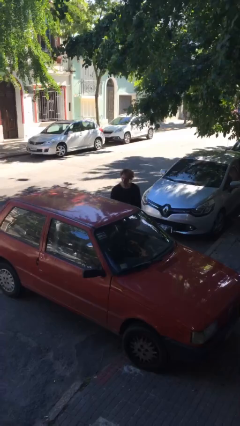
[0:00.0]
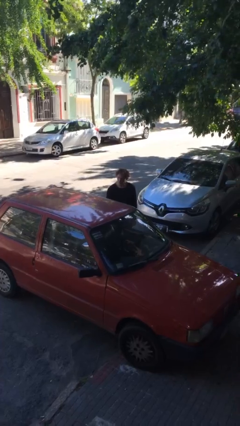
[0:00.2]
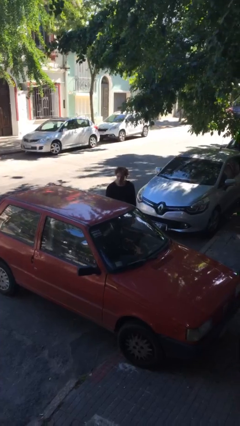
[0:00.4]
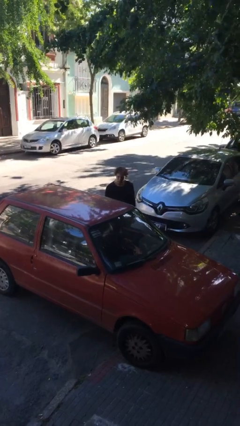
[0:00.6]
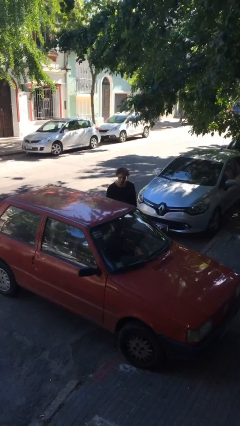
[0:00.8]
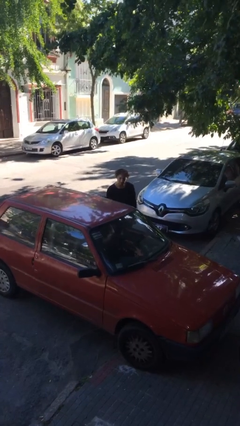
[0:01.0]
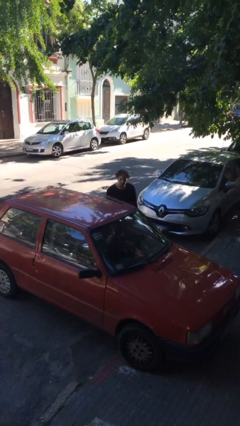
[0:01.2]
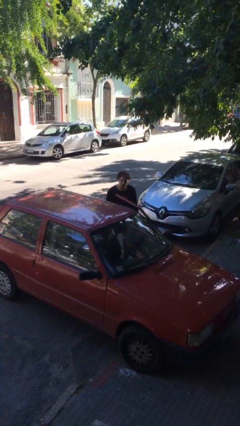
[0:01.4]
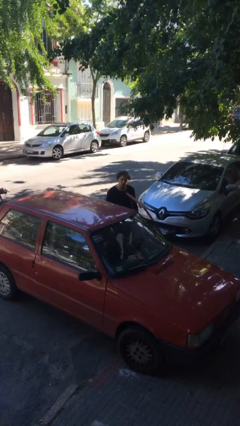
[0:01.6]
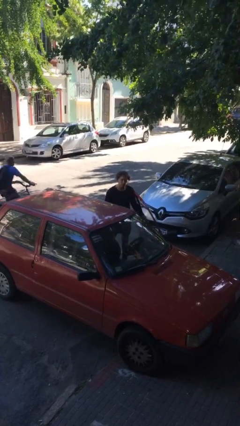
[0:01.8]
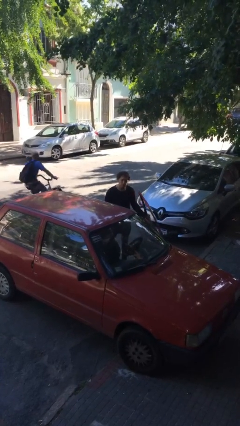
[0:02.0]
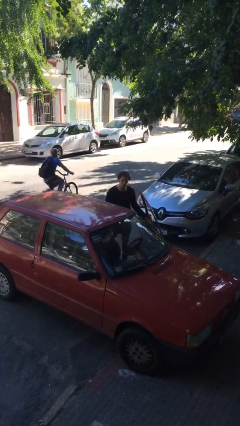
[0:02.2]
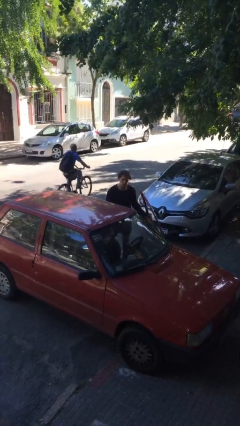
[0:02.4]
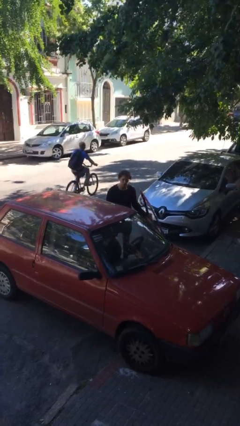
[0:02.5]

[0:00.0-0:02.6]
person opens car door

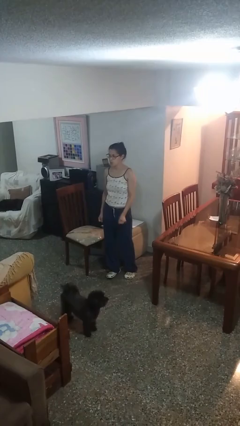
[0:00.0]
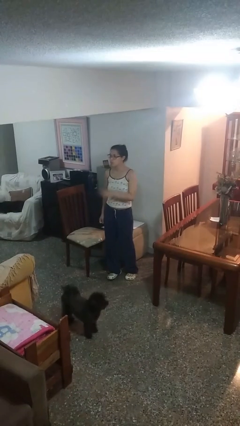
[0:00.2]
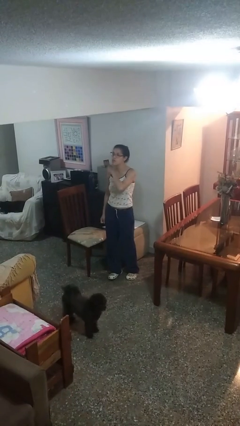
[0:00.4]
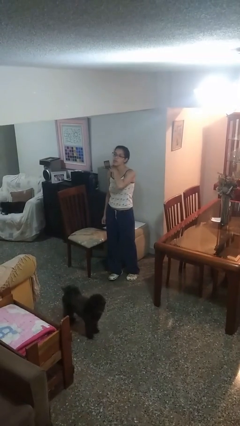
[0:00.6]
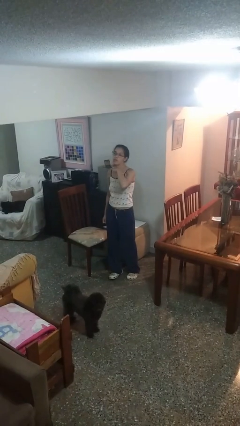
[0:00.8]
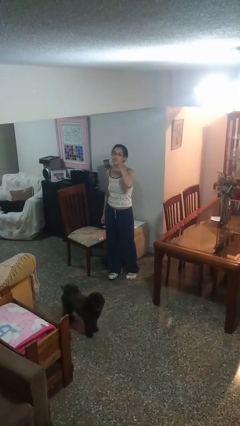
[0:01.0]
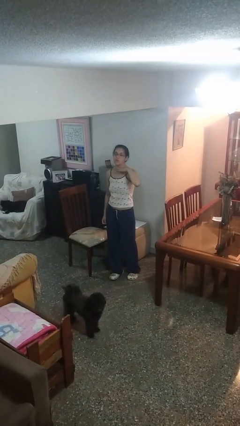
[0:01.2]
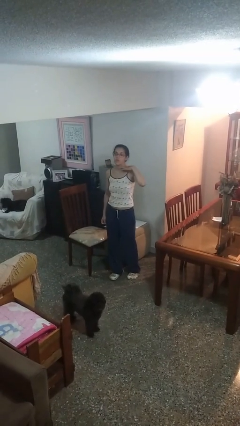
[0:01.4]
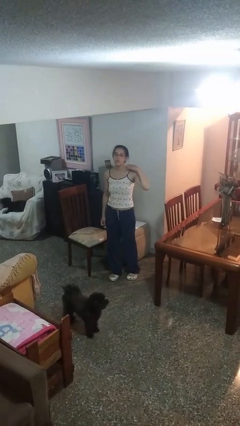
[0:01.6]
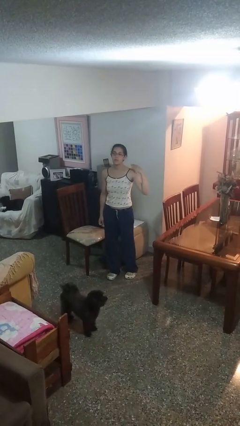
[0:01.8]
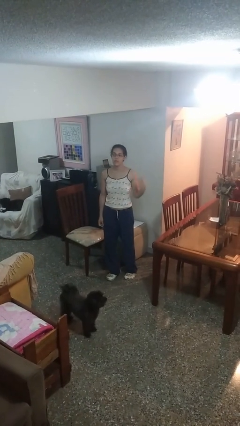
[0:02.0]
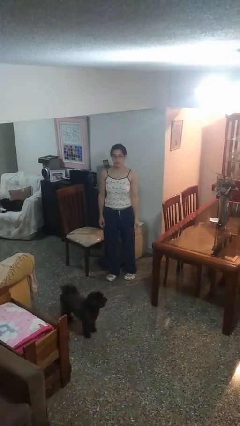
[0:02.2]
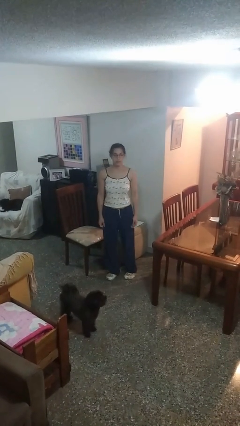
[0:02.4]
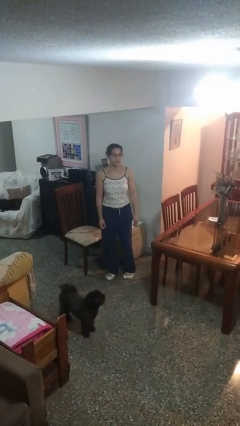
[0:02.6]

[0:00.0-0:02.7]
person gestures cut

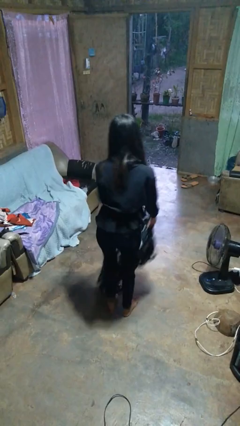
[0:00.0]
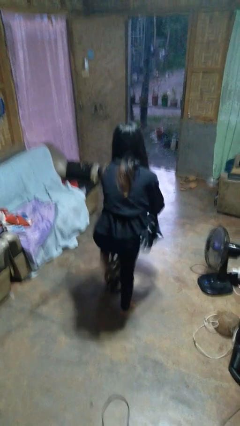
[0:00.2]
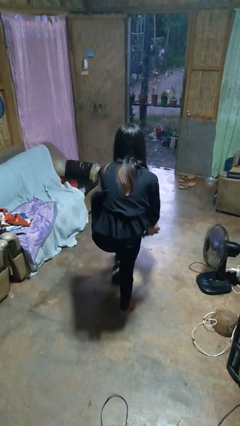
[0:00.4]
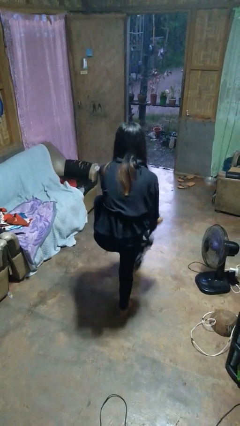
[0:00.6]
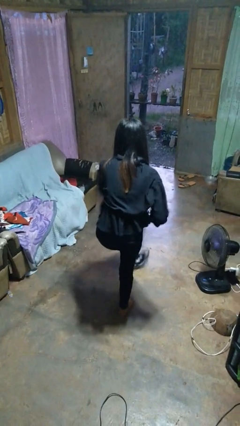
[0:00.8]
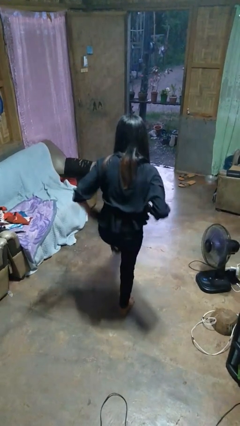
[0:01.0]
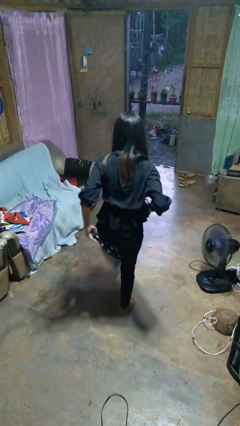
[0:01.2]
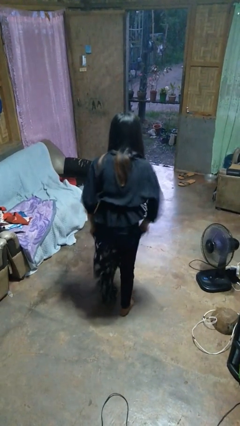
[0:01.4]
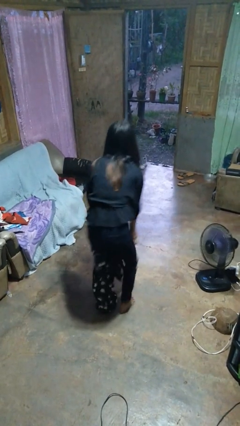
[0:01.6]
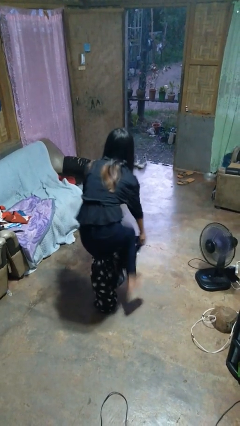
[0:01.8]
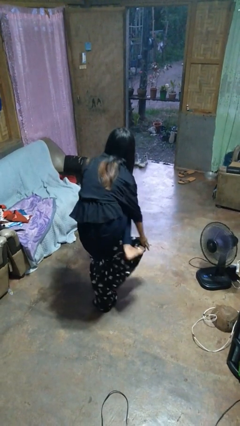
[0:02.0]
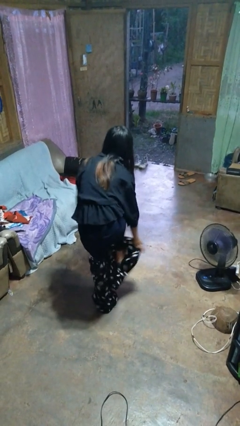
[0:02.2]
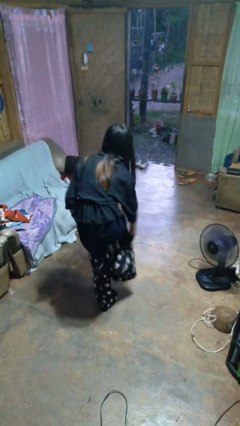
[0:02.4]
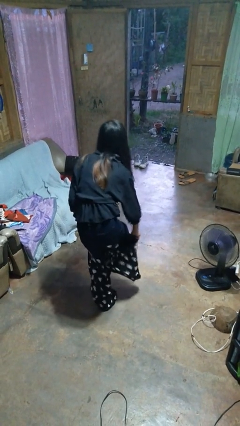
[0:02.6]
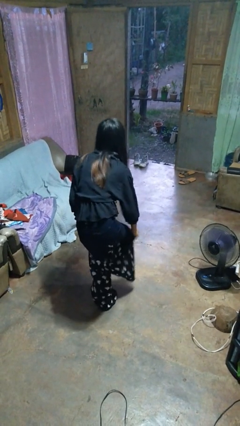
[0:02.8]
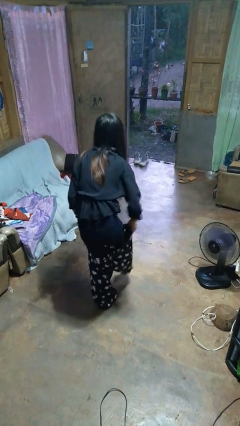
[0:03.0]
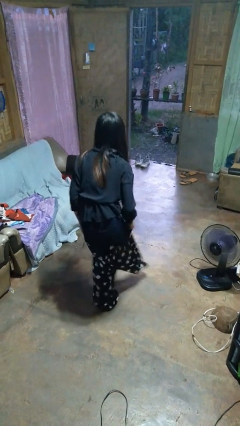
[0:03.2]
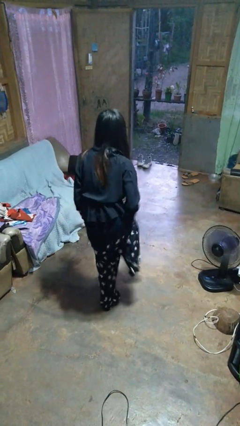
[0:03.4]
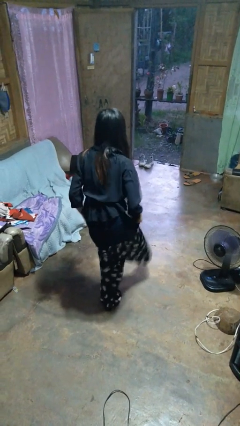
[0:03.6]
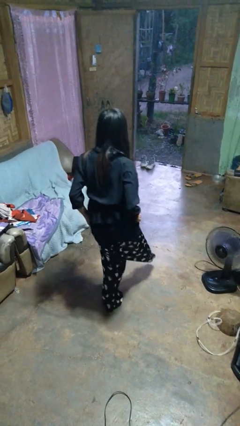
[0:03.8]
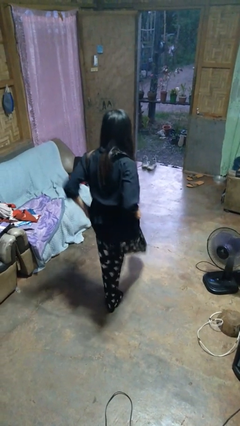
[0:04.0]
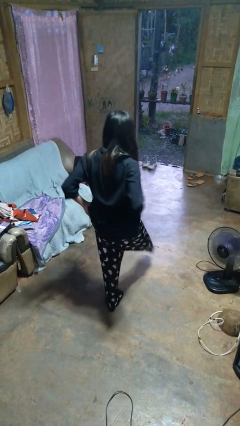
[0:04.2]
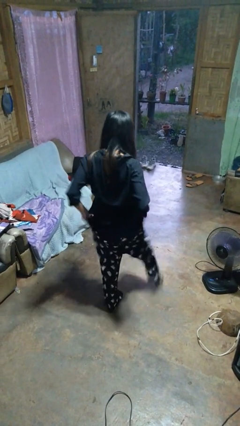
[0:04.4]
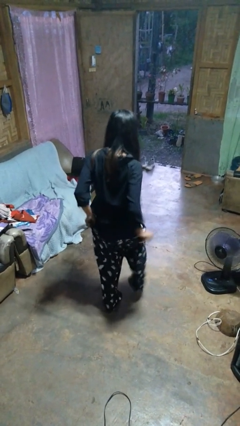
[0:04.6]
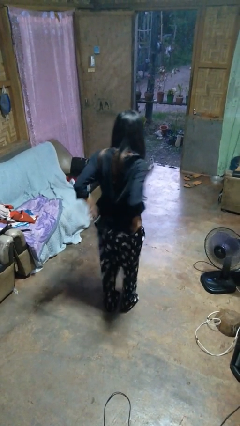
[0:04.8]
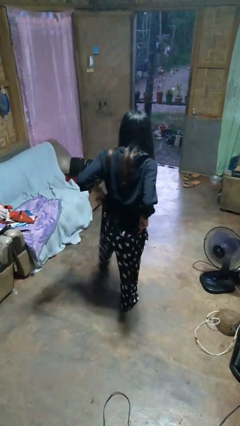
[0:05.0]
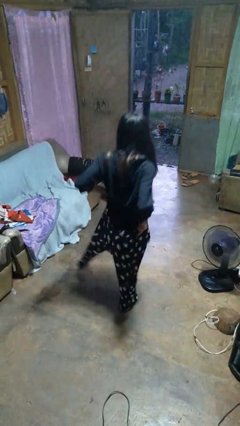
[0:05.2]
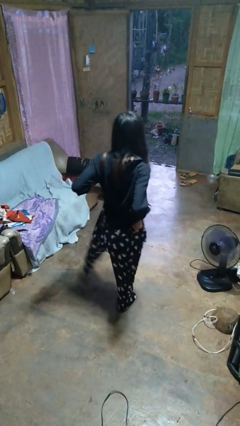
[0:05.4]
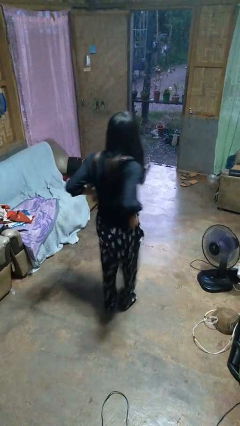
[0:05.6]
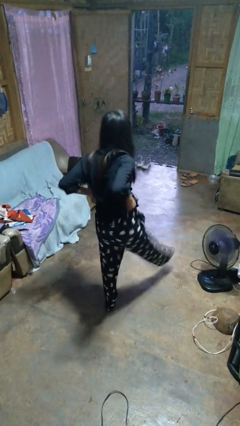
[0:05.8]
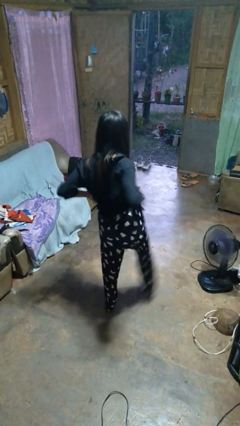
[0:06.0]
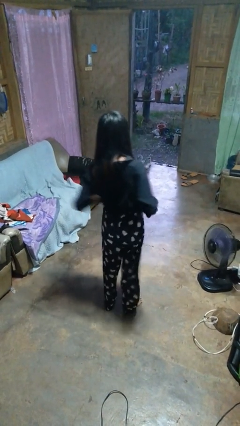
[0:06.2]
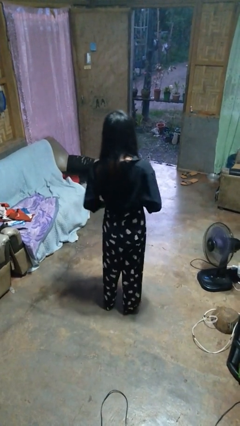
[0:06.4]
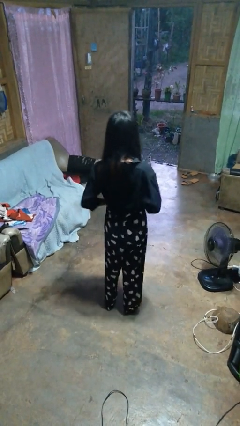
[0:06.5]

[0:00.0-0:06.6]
person puts on pants

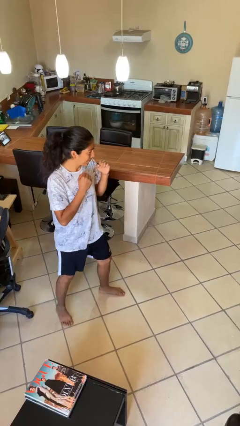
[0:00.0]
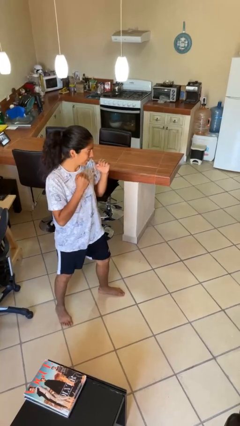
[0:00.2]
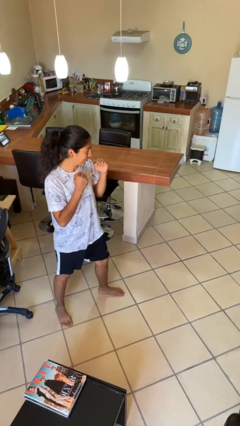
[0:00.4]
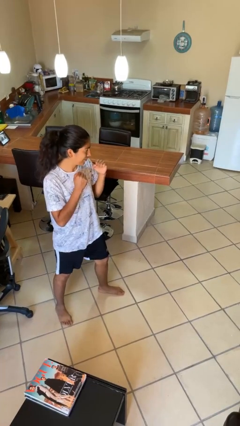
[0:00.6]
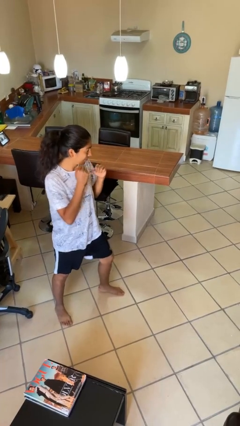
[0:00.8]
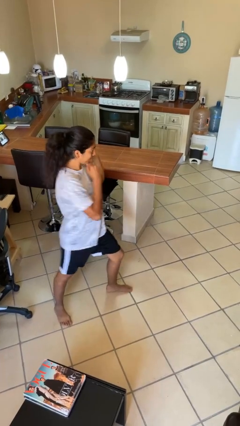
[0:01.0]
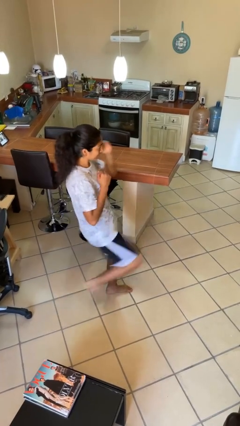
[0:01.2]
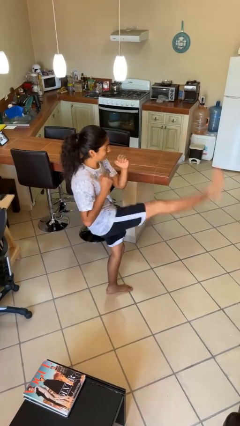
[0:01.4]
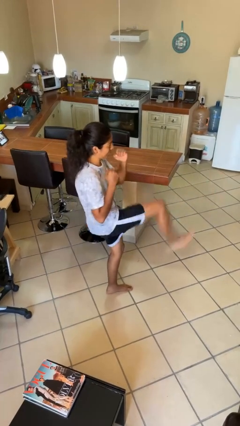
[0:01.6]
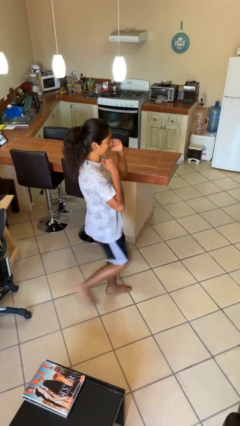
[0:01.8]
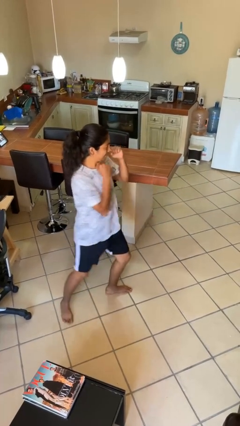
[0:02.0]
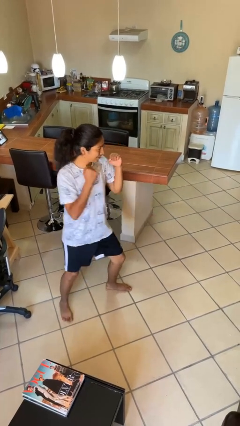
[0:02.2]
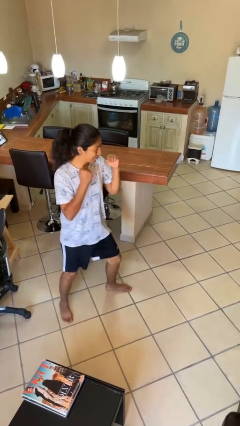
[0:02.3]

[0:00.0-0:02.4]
person karate kicks

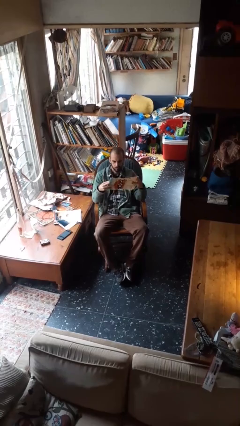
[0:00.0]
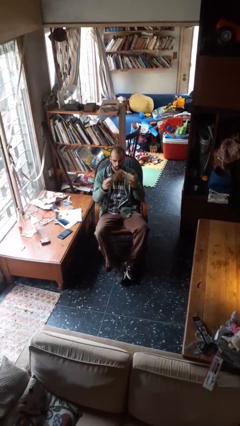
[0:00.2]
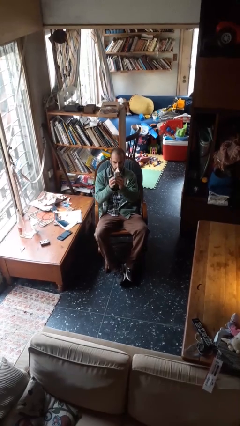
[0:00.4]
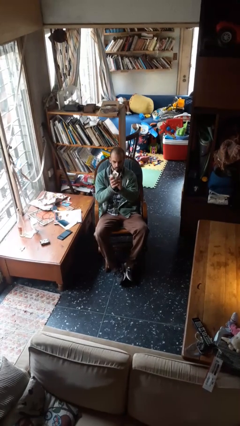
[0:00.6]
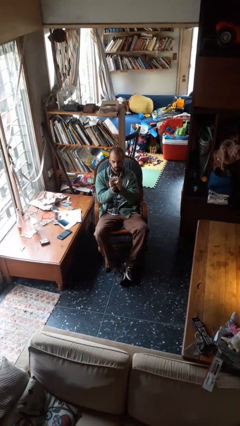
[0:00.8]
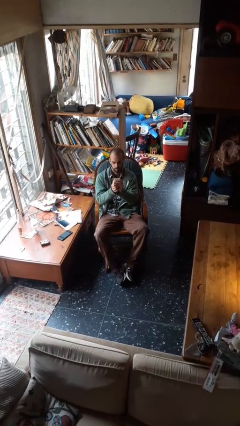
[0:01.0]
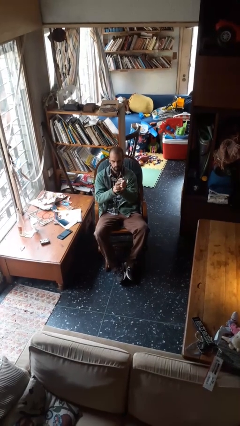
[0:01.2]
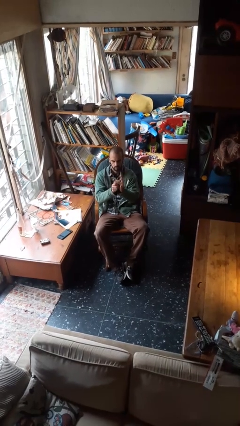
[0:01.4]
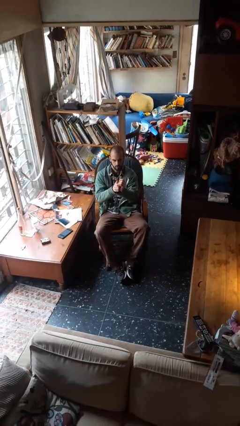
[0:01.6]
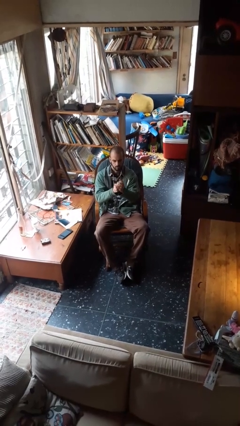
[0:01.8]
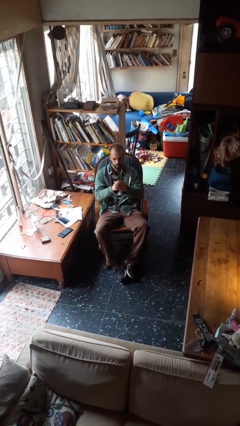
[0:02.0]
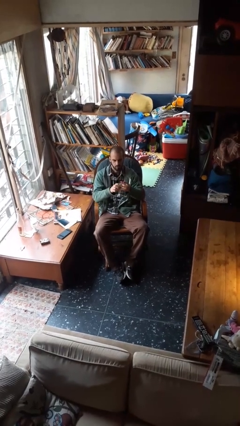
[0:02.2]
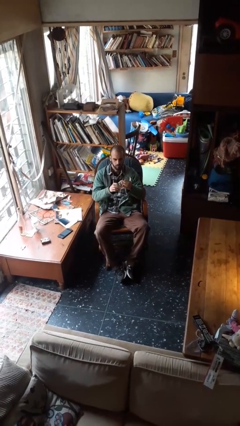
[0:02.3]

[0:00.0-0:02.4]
person crumples paper

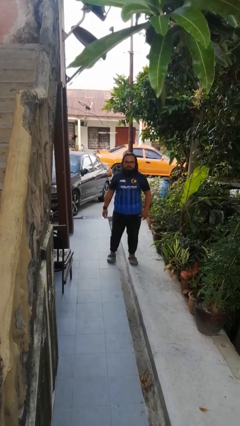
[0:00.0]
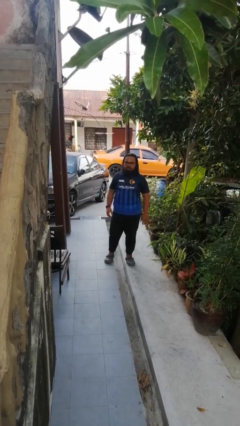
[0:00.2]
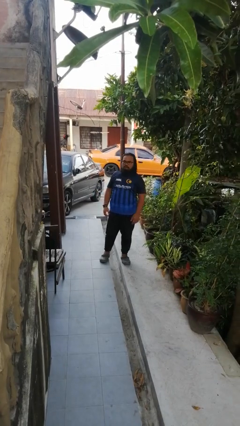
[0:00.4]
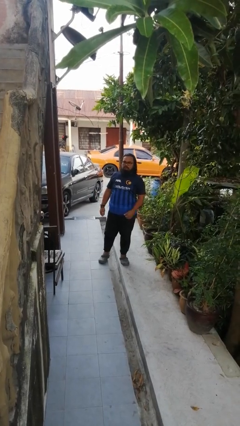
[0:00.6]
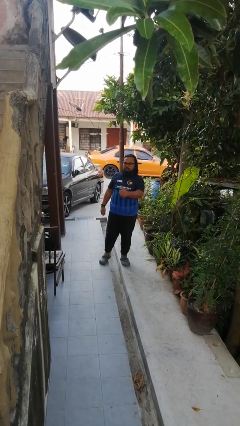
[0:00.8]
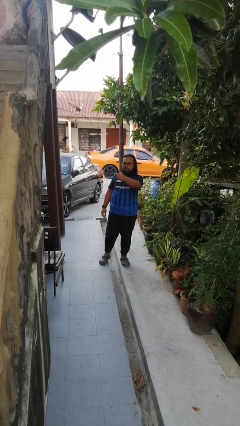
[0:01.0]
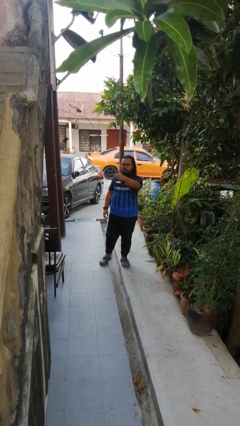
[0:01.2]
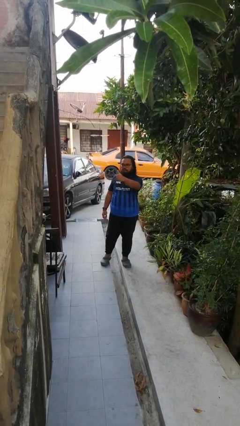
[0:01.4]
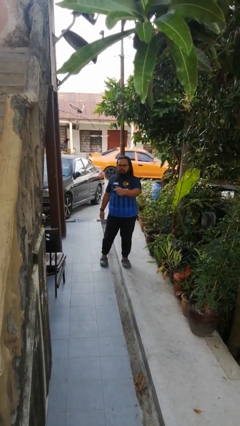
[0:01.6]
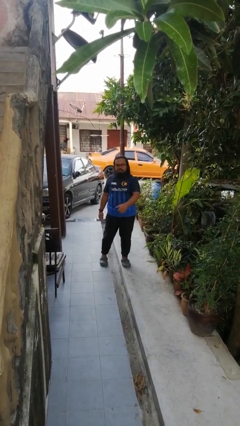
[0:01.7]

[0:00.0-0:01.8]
person gestures thumbs up
